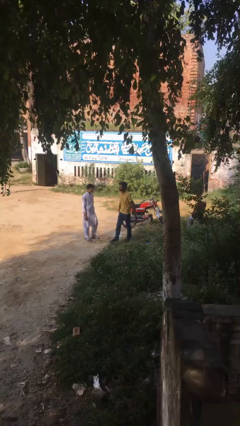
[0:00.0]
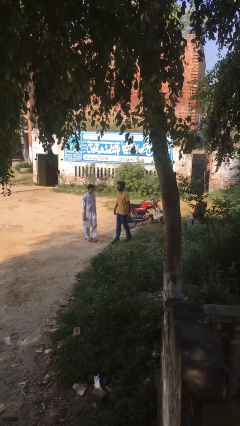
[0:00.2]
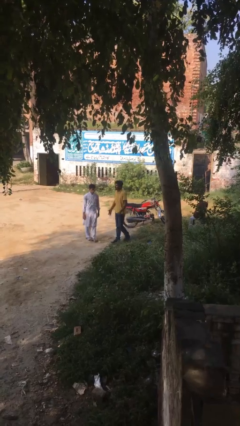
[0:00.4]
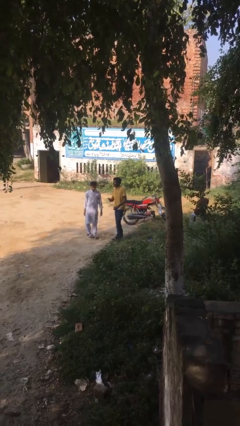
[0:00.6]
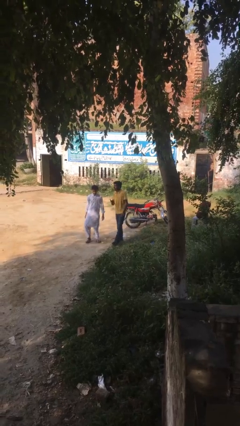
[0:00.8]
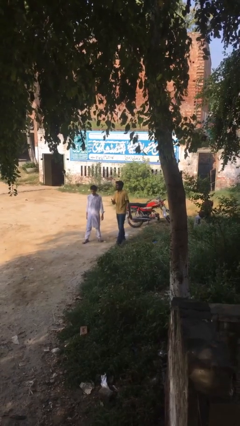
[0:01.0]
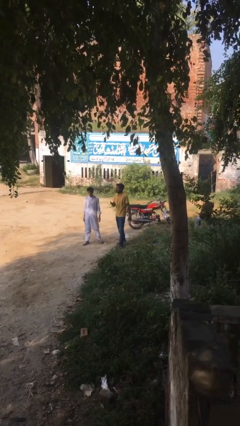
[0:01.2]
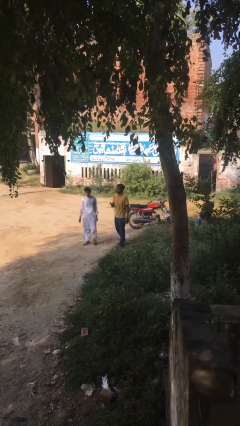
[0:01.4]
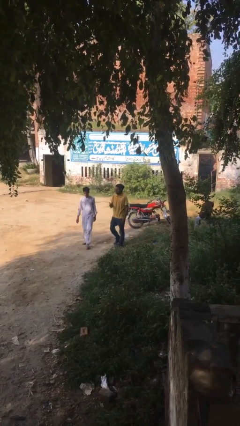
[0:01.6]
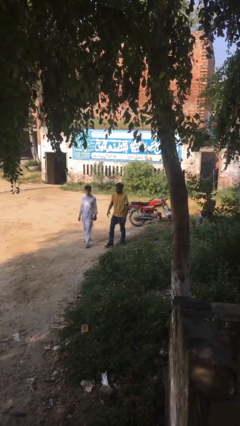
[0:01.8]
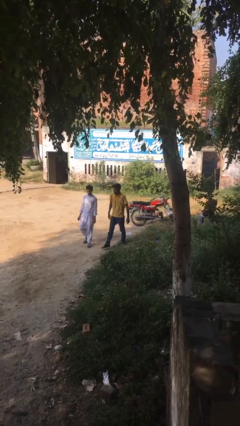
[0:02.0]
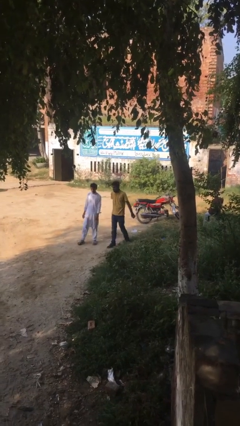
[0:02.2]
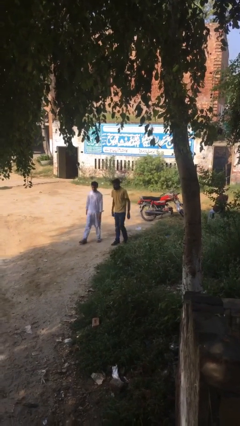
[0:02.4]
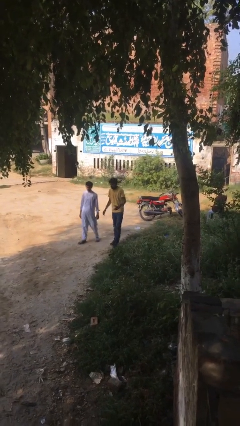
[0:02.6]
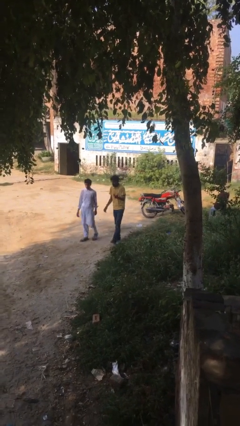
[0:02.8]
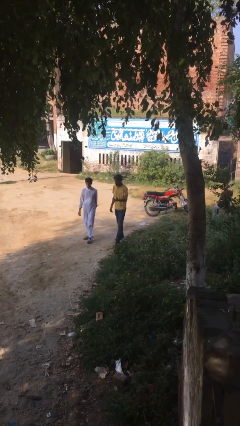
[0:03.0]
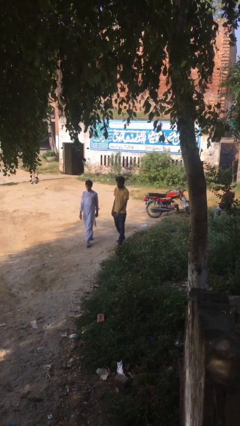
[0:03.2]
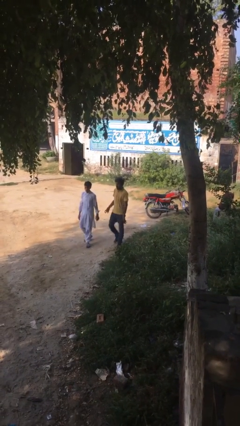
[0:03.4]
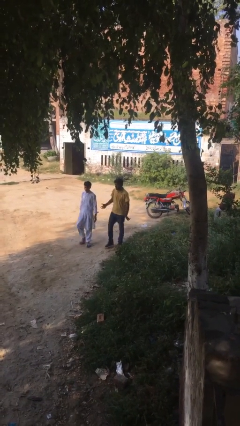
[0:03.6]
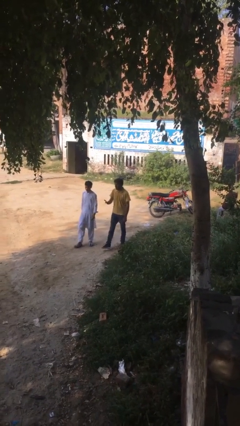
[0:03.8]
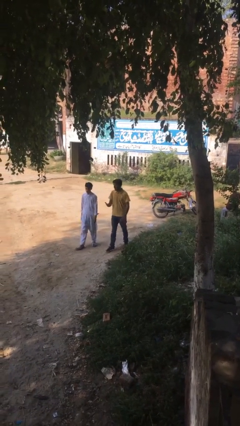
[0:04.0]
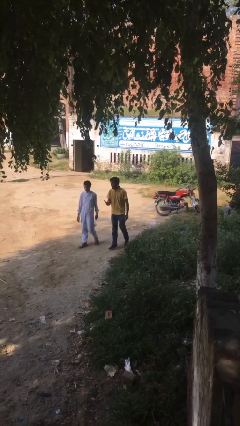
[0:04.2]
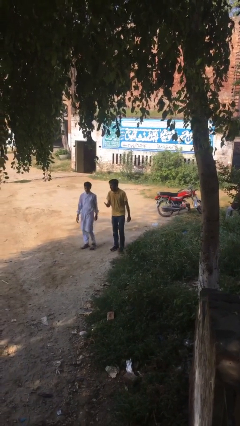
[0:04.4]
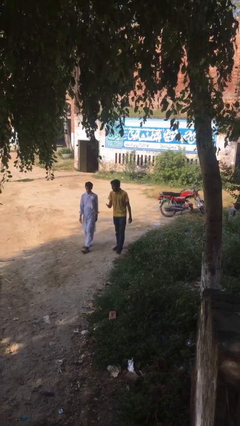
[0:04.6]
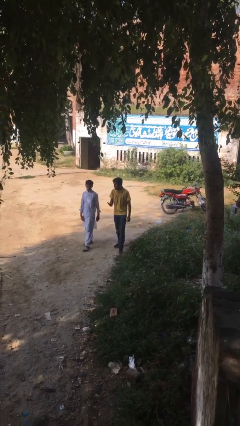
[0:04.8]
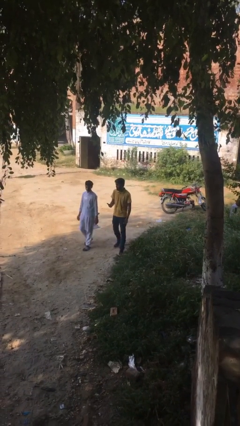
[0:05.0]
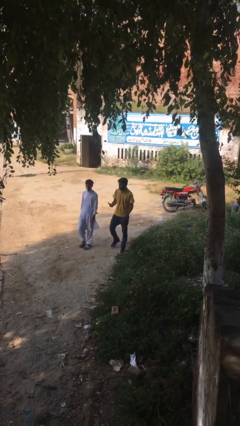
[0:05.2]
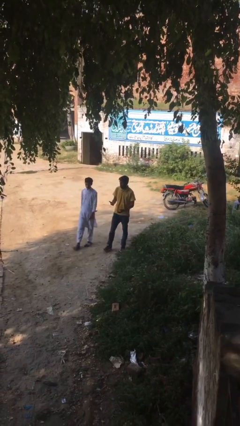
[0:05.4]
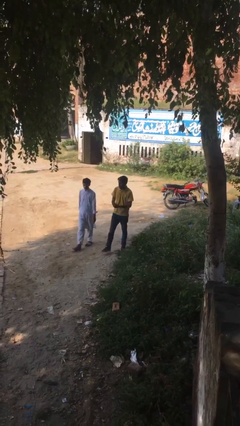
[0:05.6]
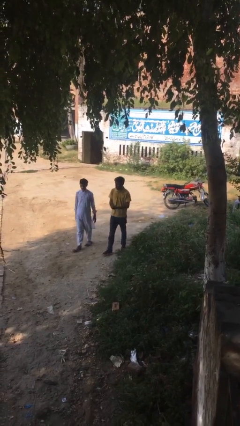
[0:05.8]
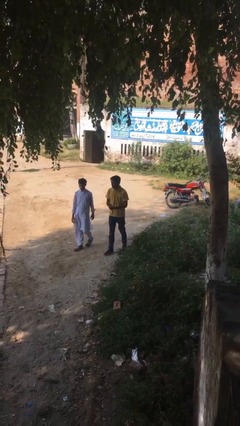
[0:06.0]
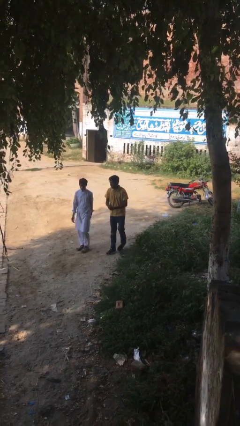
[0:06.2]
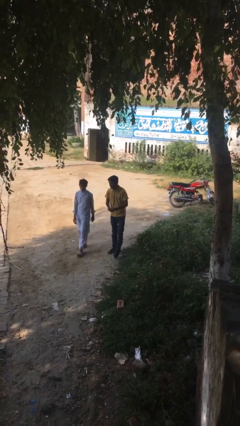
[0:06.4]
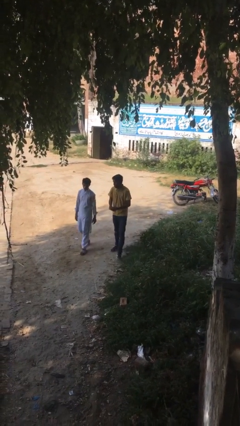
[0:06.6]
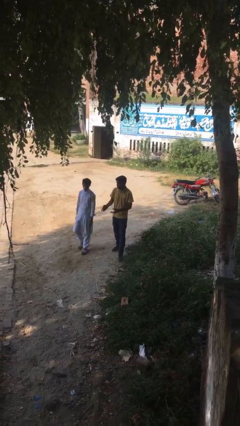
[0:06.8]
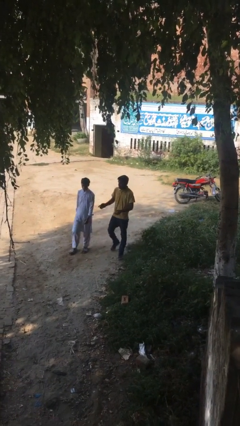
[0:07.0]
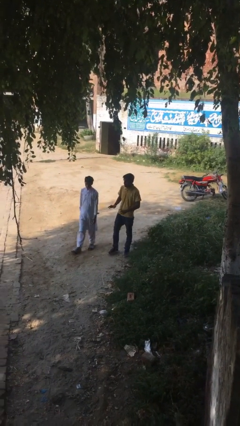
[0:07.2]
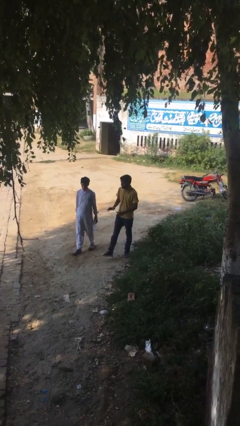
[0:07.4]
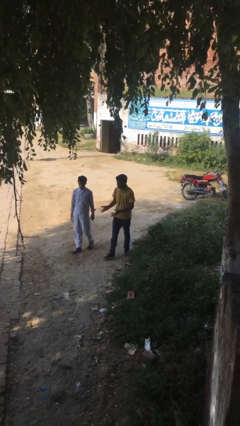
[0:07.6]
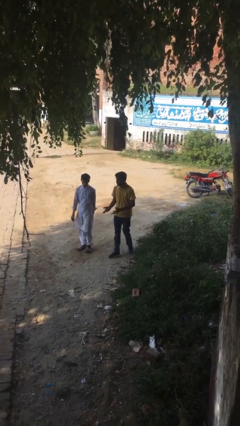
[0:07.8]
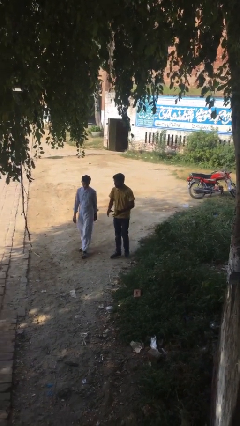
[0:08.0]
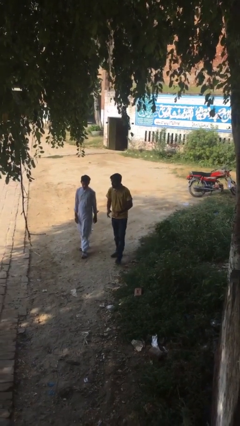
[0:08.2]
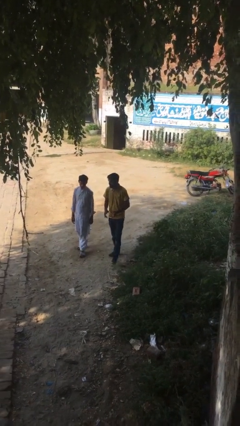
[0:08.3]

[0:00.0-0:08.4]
person talks to person

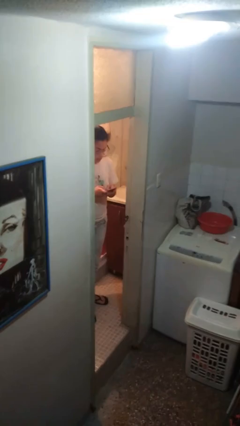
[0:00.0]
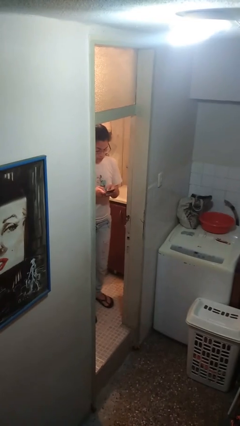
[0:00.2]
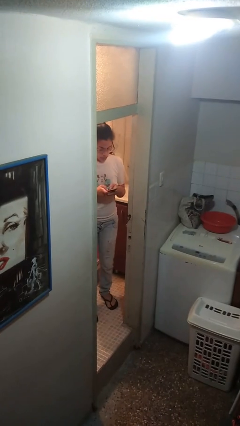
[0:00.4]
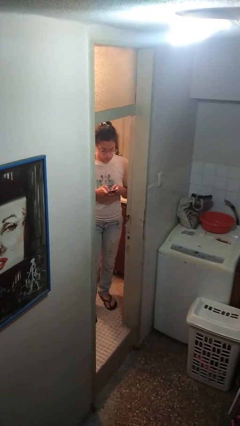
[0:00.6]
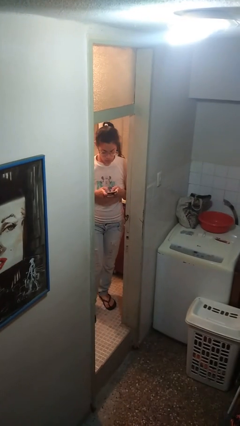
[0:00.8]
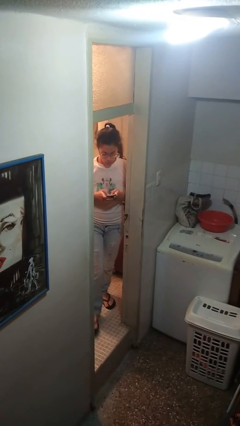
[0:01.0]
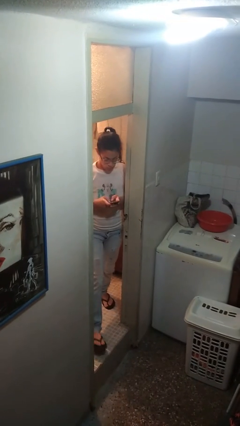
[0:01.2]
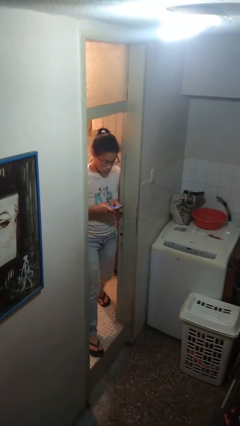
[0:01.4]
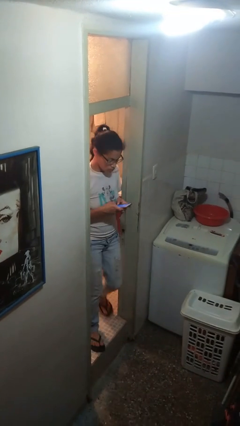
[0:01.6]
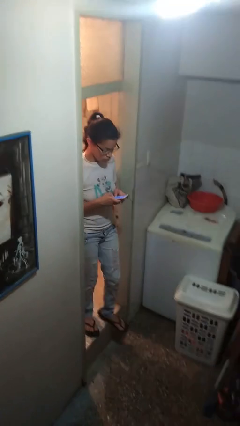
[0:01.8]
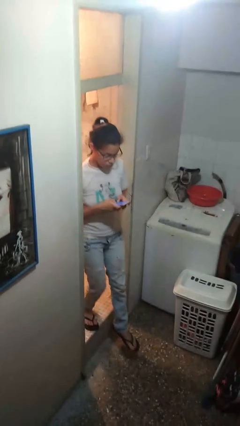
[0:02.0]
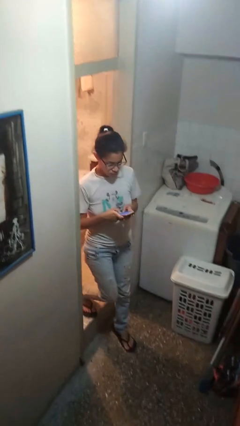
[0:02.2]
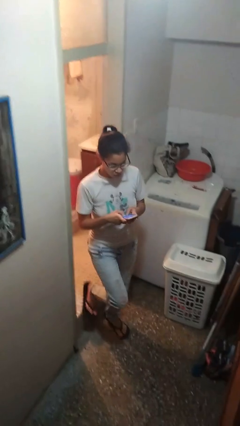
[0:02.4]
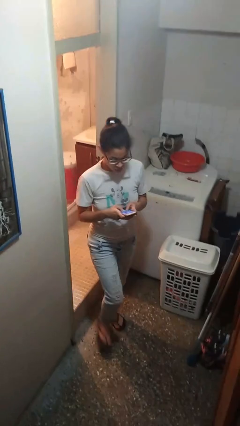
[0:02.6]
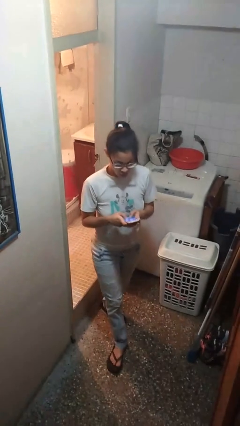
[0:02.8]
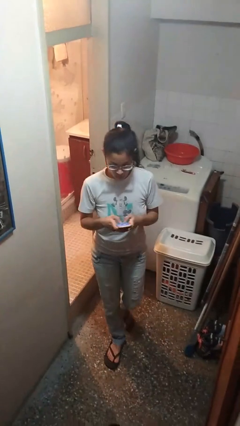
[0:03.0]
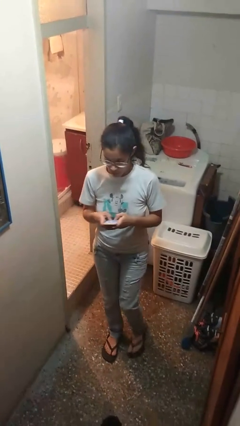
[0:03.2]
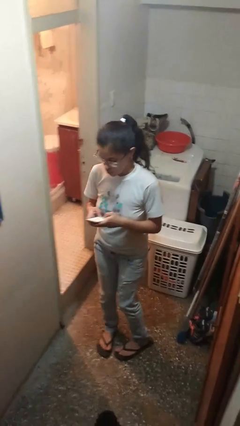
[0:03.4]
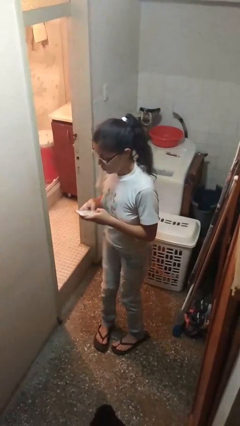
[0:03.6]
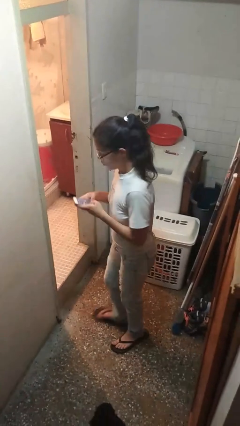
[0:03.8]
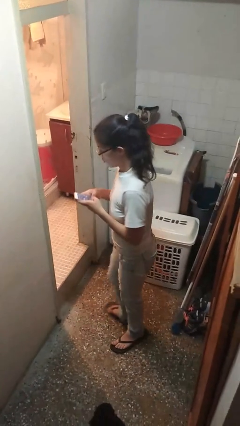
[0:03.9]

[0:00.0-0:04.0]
person enters scene through structure

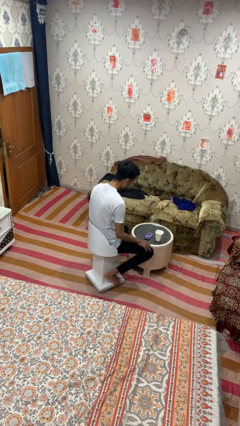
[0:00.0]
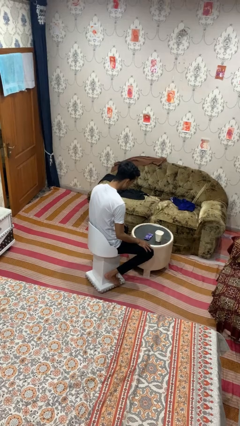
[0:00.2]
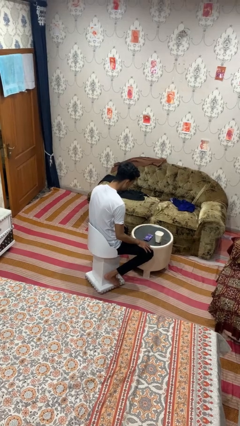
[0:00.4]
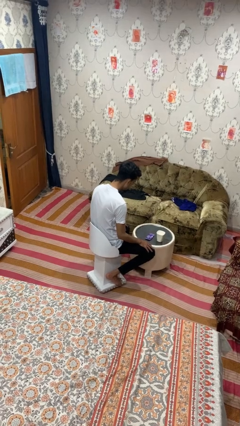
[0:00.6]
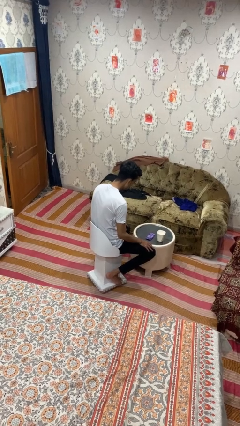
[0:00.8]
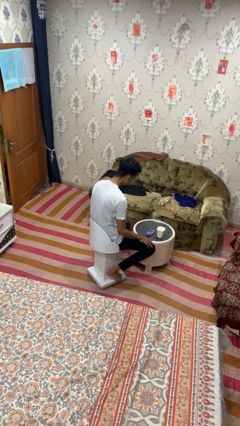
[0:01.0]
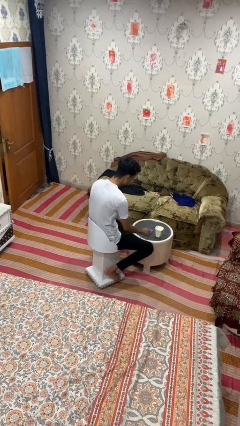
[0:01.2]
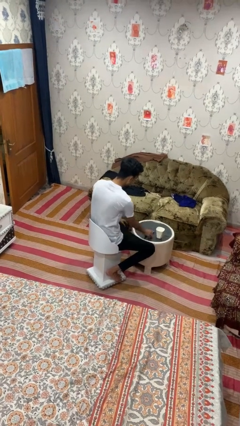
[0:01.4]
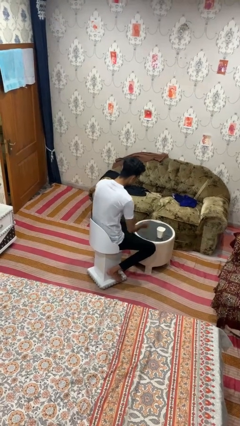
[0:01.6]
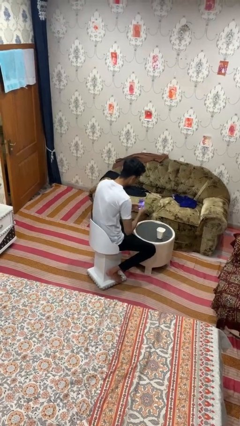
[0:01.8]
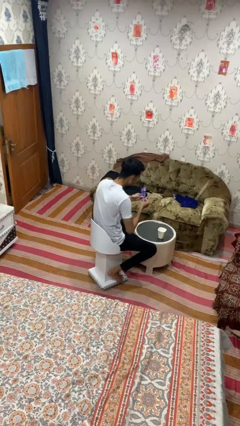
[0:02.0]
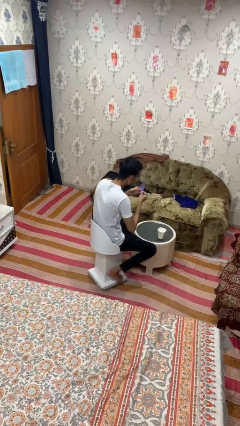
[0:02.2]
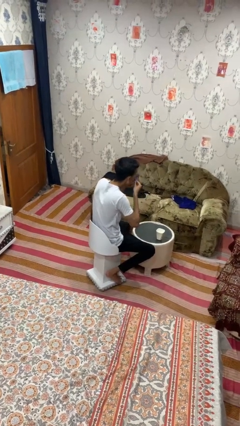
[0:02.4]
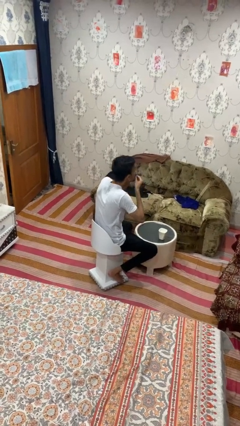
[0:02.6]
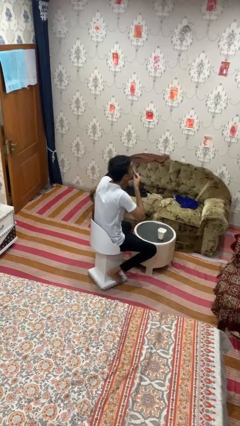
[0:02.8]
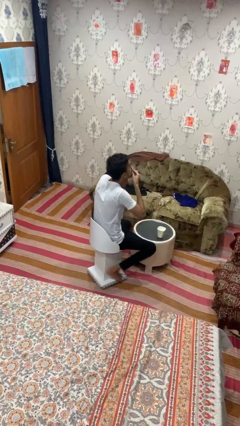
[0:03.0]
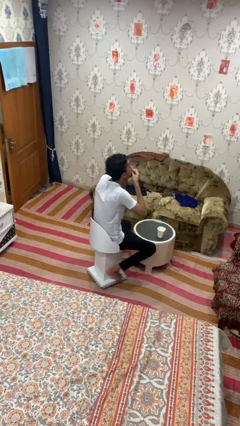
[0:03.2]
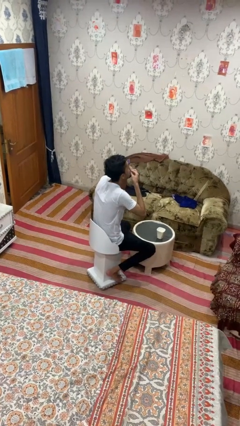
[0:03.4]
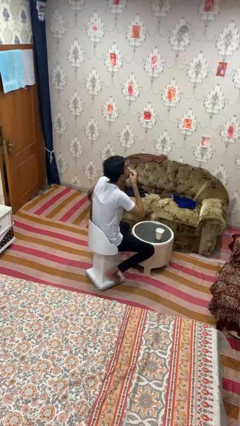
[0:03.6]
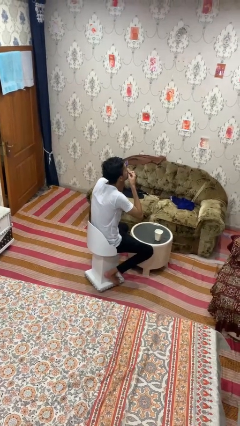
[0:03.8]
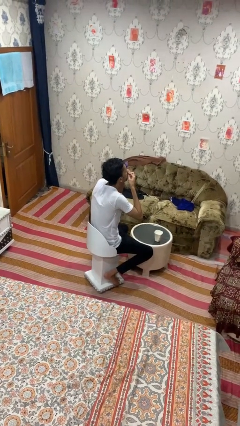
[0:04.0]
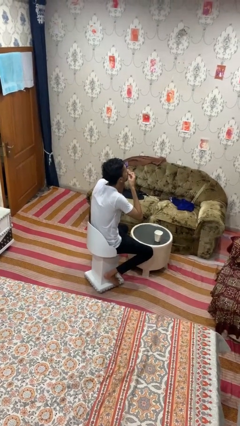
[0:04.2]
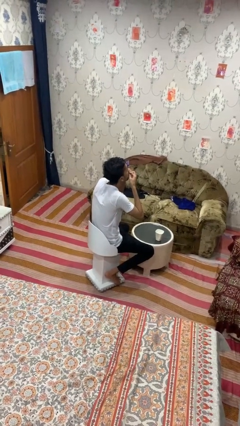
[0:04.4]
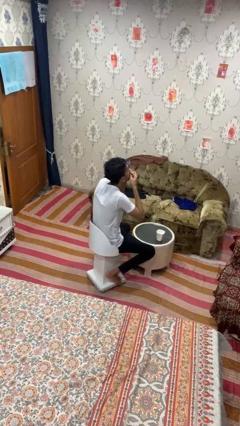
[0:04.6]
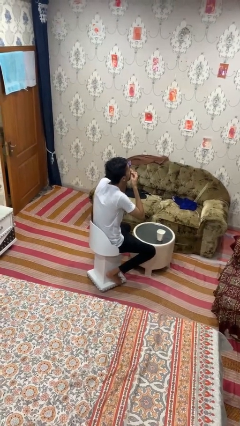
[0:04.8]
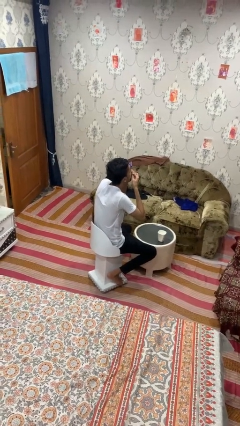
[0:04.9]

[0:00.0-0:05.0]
person takes medicine pills

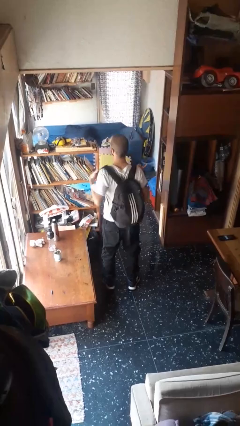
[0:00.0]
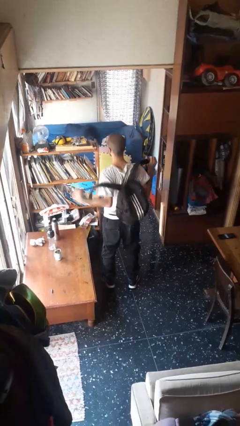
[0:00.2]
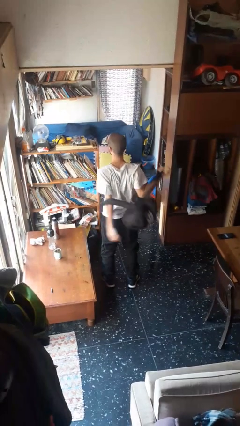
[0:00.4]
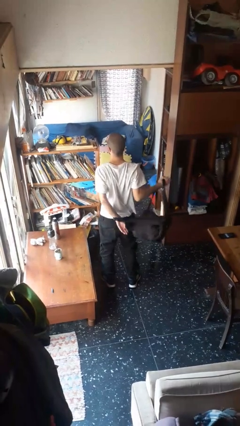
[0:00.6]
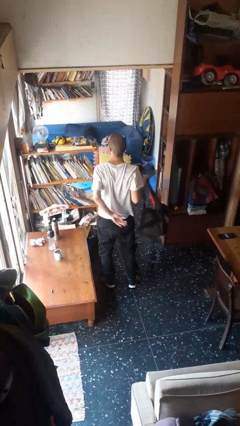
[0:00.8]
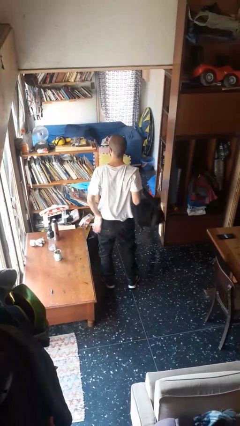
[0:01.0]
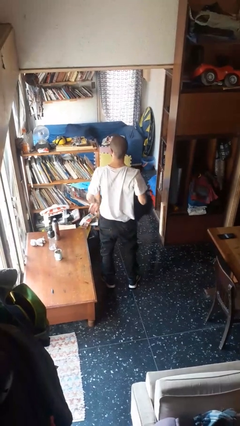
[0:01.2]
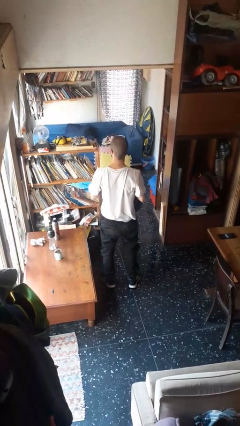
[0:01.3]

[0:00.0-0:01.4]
person takes off backpack
